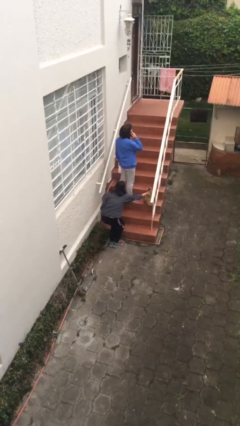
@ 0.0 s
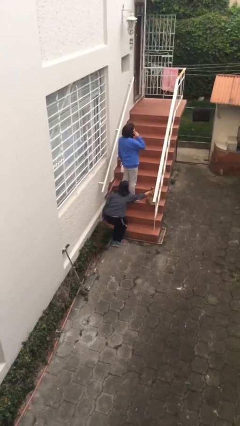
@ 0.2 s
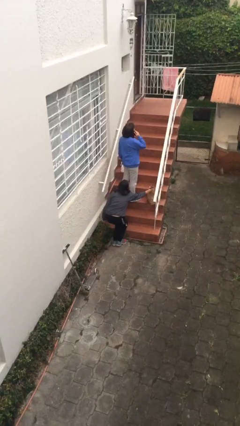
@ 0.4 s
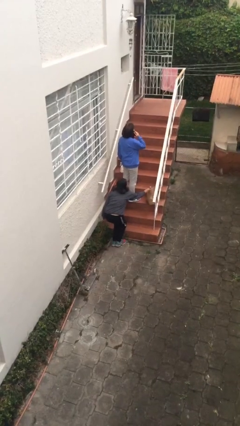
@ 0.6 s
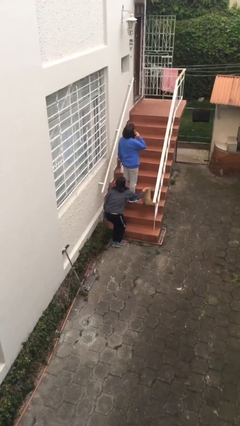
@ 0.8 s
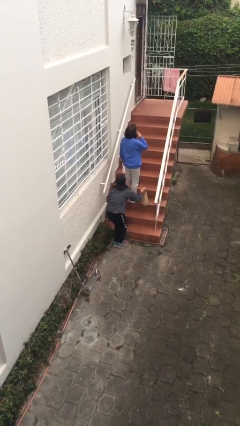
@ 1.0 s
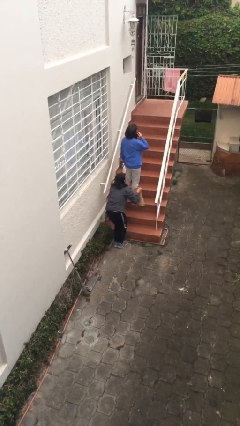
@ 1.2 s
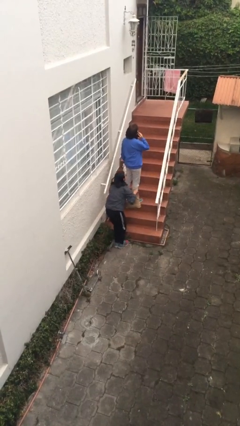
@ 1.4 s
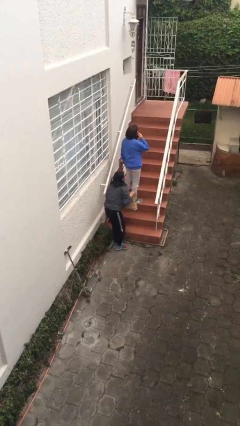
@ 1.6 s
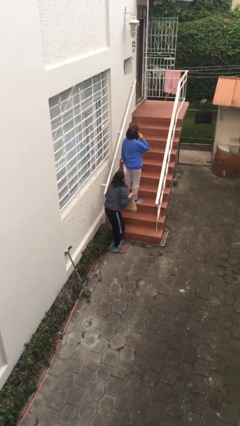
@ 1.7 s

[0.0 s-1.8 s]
person steals object from person

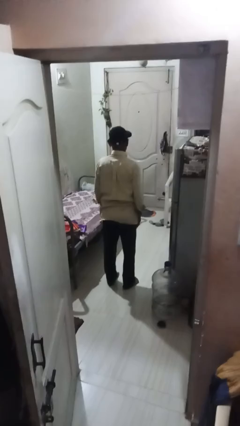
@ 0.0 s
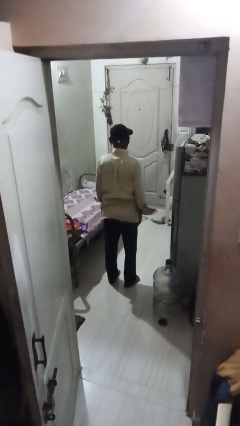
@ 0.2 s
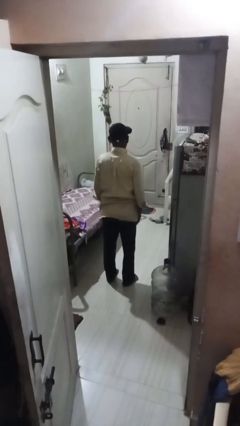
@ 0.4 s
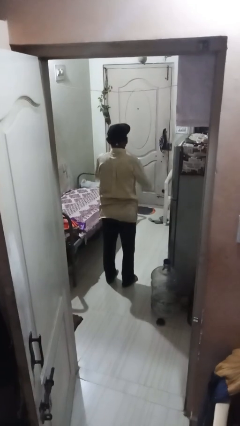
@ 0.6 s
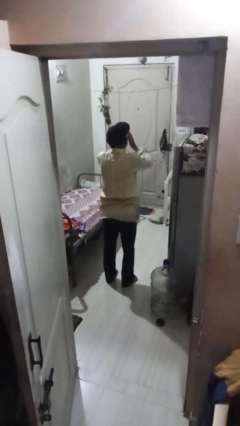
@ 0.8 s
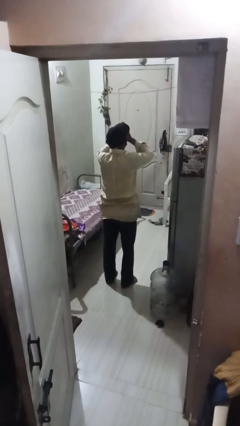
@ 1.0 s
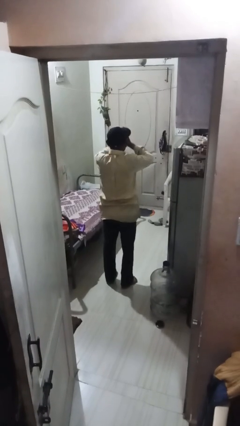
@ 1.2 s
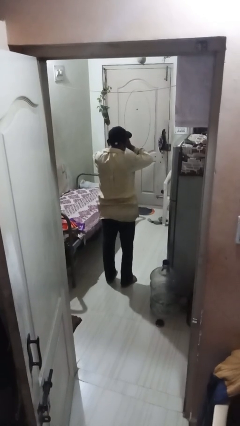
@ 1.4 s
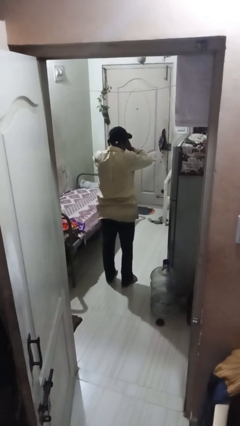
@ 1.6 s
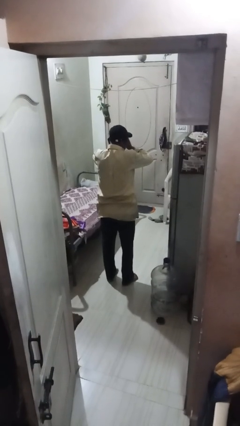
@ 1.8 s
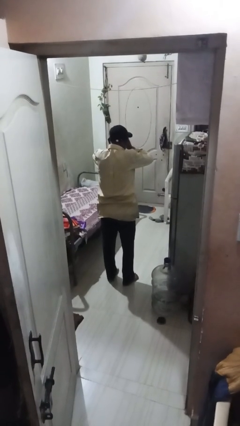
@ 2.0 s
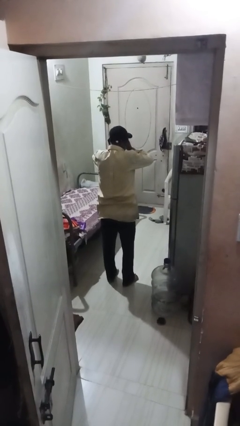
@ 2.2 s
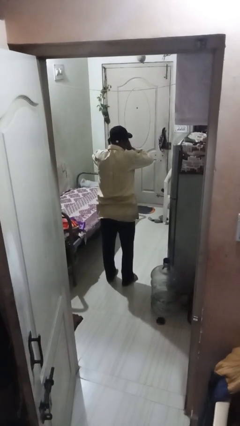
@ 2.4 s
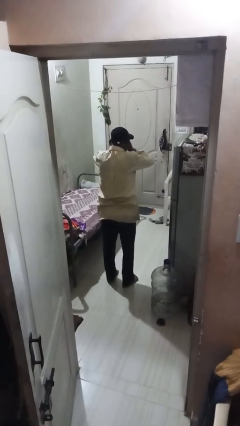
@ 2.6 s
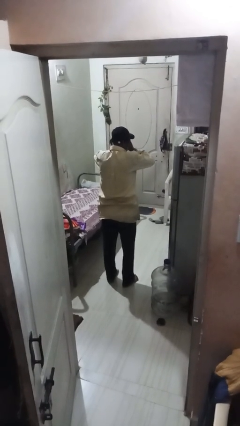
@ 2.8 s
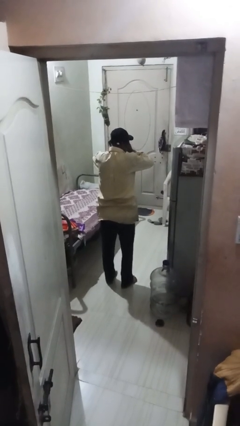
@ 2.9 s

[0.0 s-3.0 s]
person prays

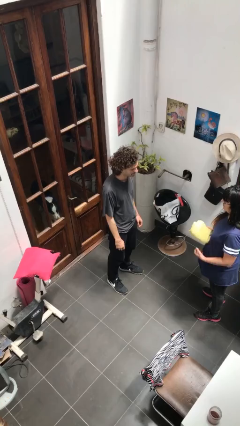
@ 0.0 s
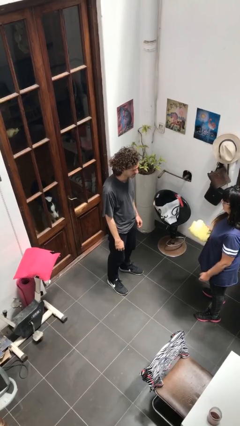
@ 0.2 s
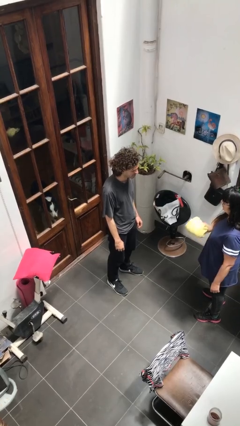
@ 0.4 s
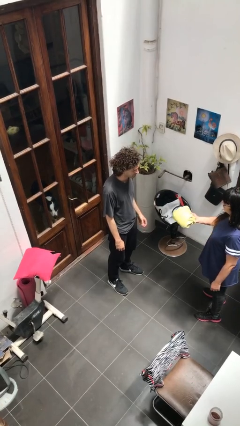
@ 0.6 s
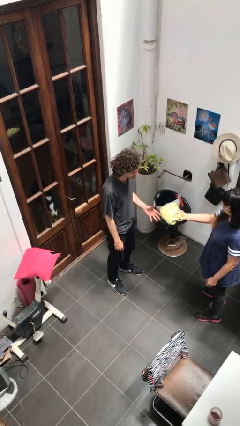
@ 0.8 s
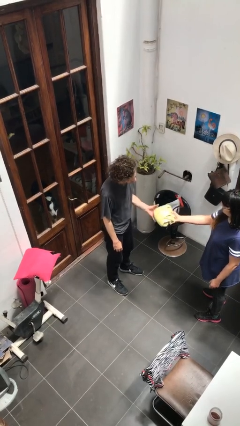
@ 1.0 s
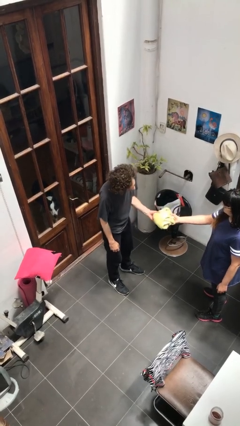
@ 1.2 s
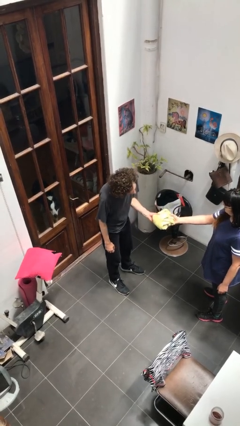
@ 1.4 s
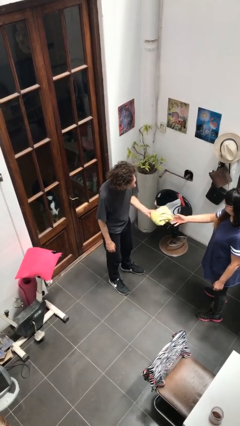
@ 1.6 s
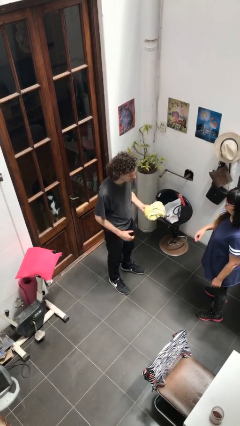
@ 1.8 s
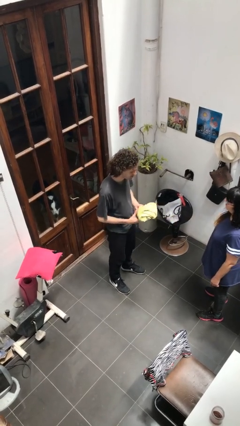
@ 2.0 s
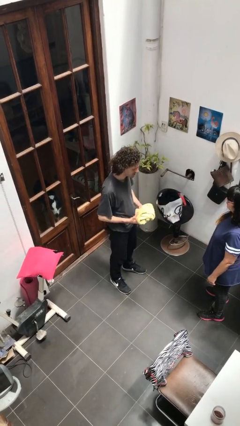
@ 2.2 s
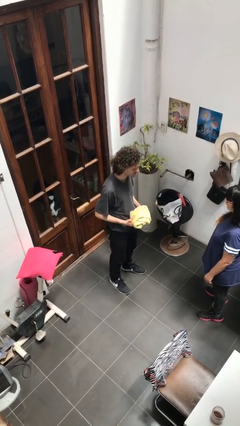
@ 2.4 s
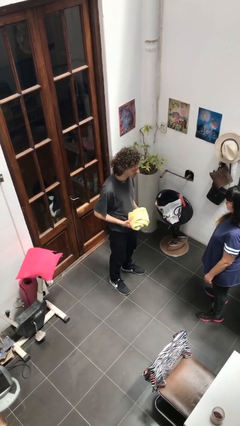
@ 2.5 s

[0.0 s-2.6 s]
person transfers object to person

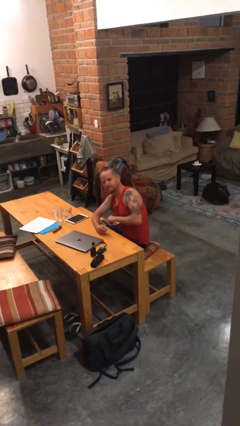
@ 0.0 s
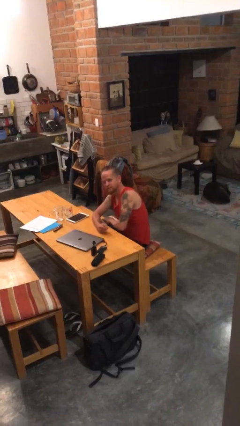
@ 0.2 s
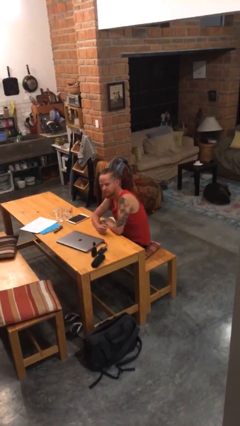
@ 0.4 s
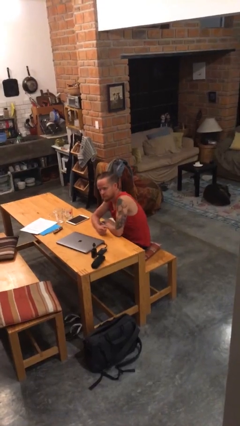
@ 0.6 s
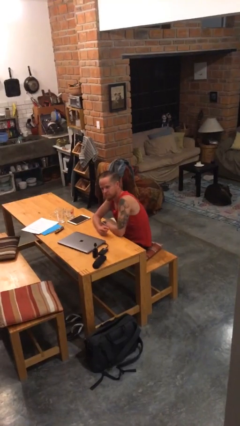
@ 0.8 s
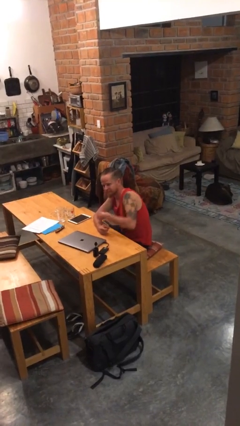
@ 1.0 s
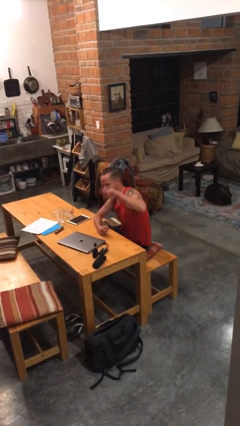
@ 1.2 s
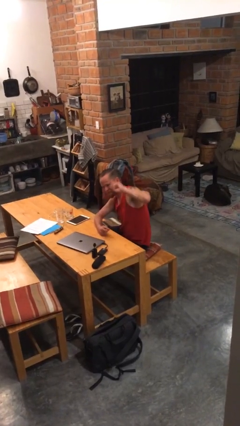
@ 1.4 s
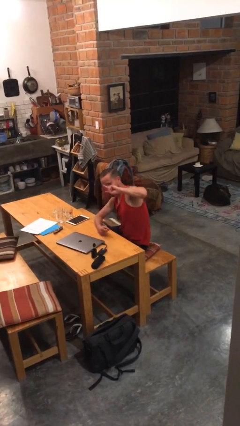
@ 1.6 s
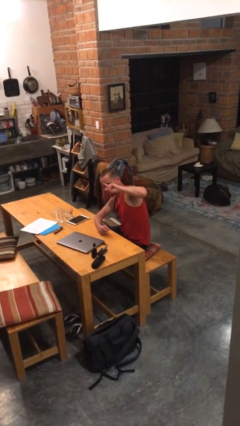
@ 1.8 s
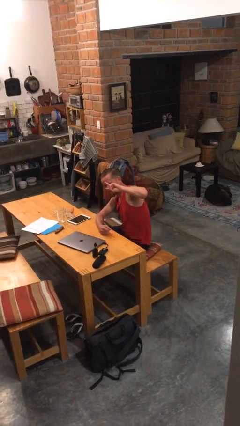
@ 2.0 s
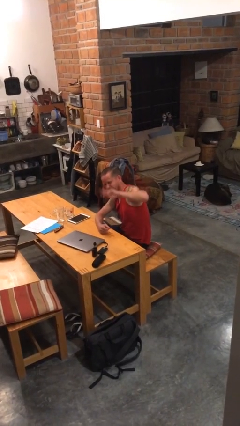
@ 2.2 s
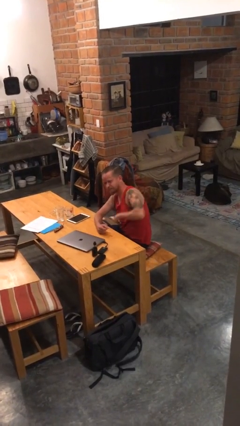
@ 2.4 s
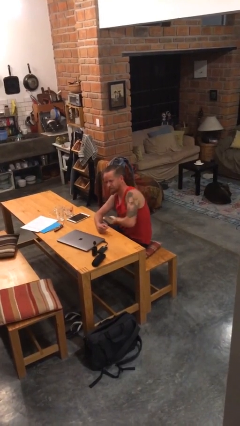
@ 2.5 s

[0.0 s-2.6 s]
person gestures peace

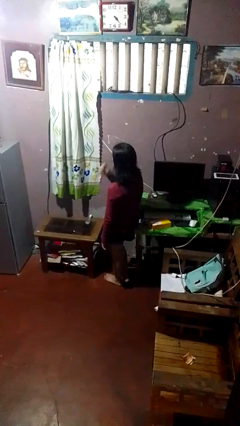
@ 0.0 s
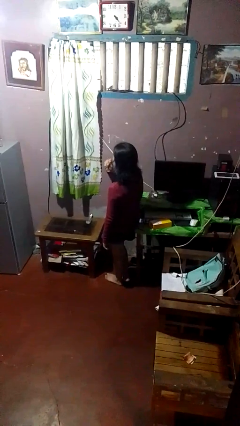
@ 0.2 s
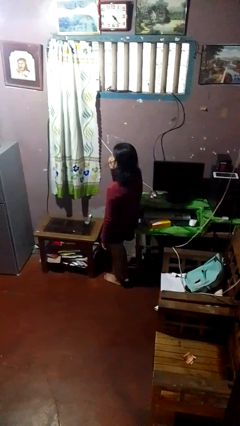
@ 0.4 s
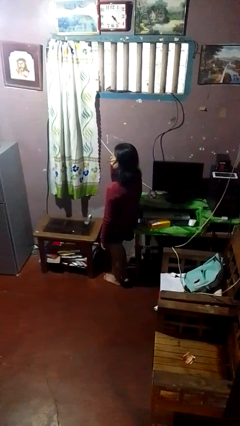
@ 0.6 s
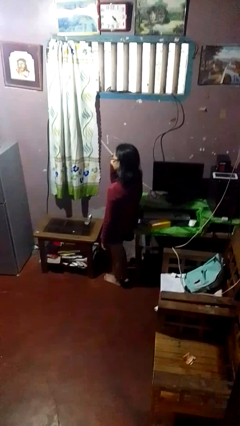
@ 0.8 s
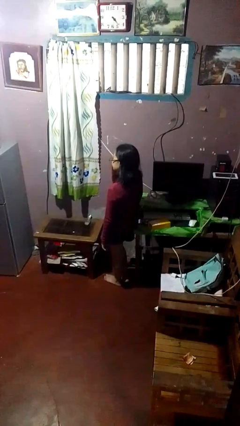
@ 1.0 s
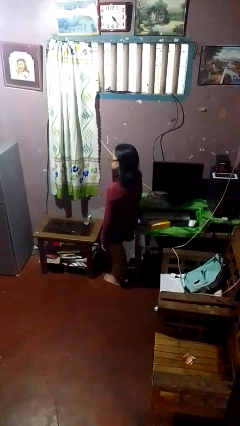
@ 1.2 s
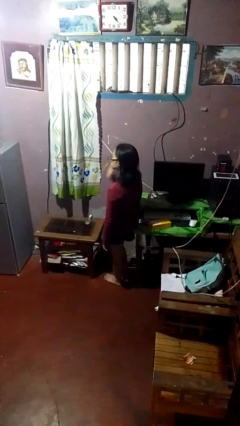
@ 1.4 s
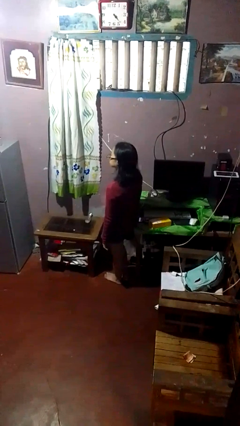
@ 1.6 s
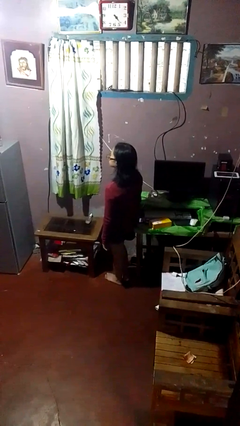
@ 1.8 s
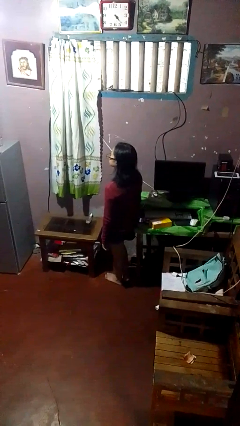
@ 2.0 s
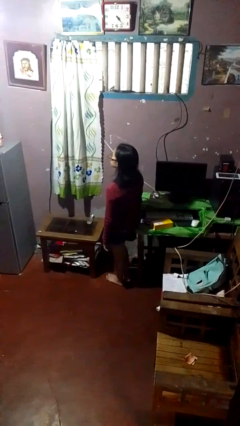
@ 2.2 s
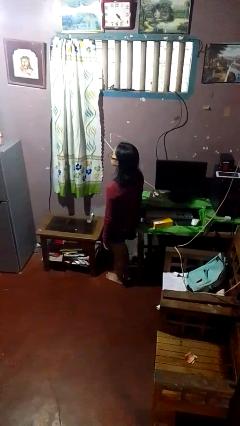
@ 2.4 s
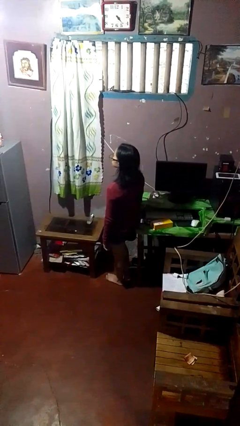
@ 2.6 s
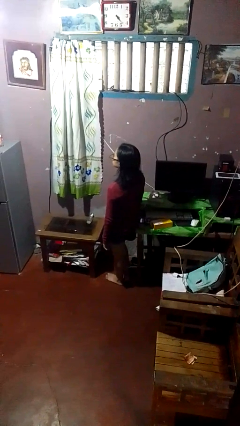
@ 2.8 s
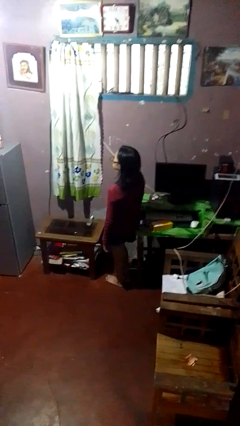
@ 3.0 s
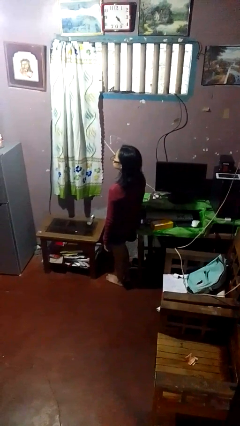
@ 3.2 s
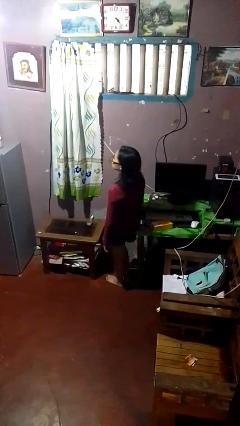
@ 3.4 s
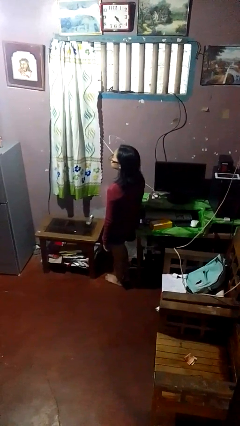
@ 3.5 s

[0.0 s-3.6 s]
person puts on glasses

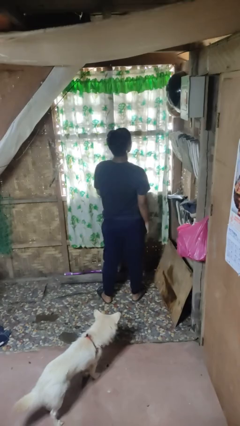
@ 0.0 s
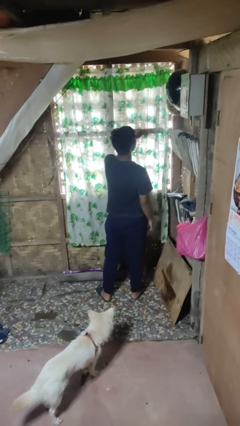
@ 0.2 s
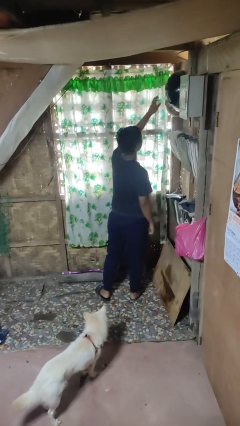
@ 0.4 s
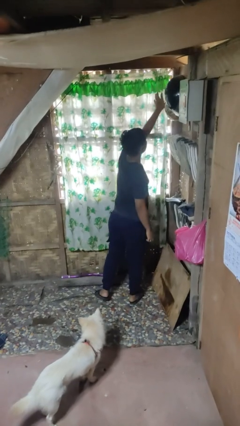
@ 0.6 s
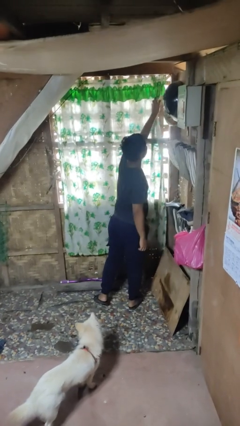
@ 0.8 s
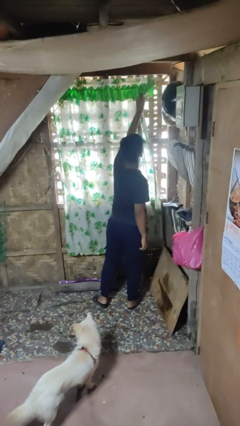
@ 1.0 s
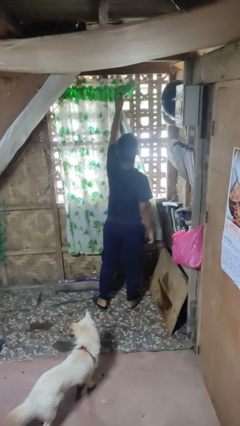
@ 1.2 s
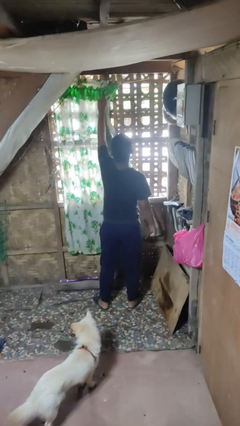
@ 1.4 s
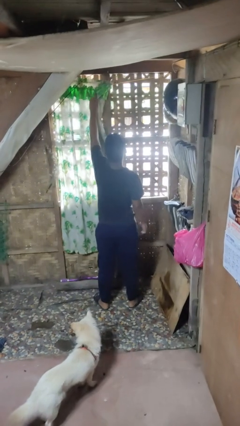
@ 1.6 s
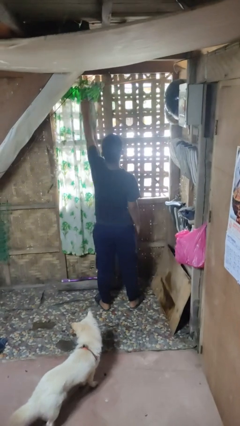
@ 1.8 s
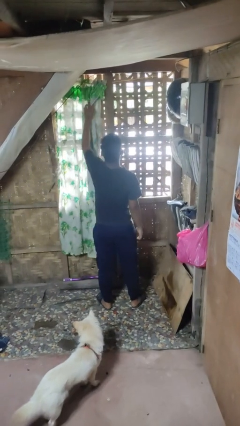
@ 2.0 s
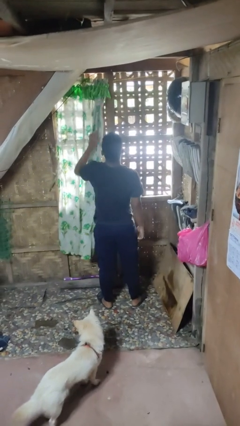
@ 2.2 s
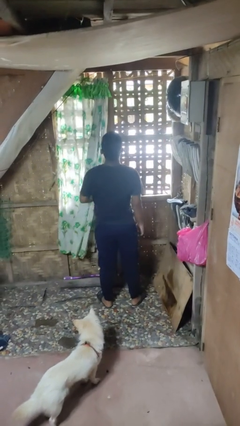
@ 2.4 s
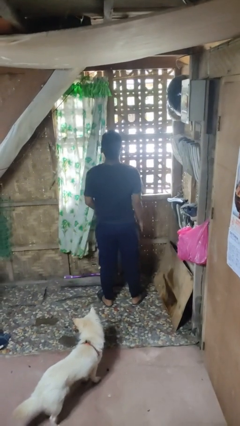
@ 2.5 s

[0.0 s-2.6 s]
person opens curtains

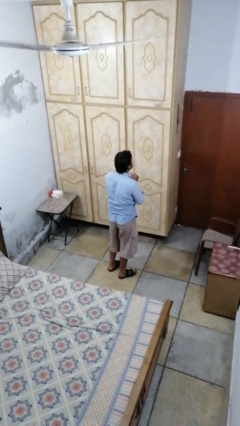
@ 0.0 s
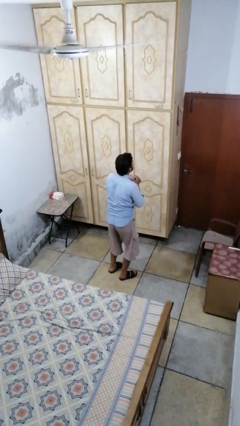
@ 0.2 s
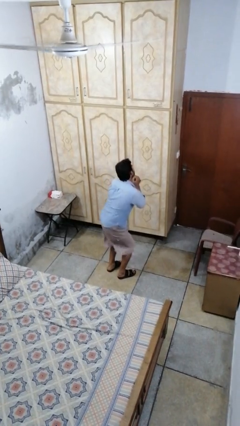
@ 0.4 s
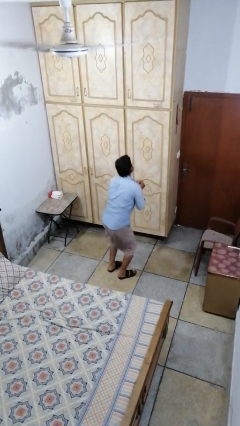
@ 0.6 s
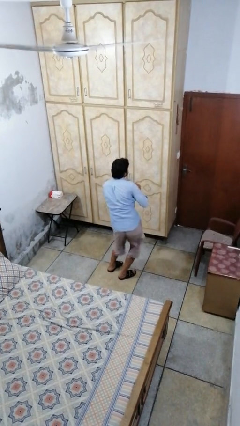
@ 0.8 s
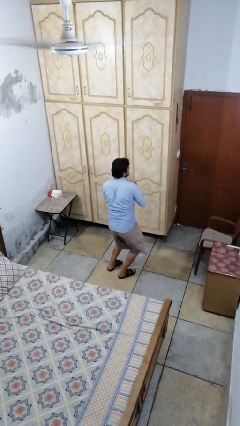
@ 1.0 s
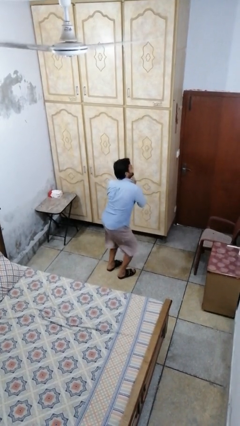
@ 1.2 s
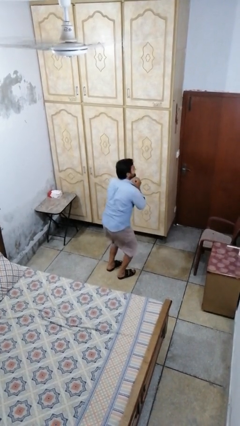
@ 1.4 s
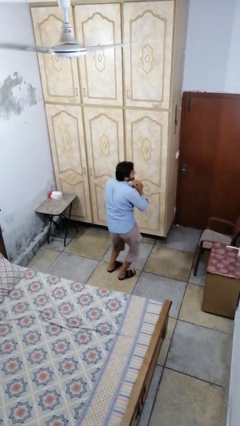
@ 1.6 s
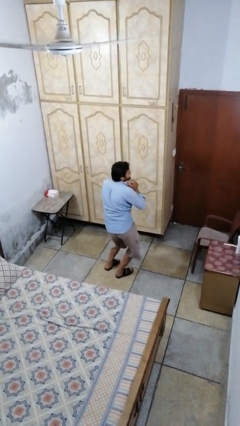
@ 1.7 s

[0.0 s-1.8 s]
person wiggles hips
